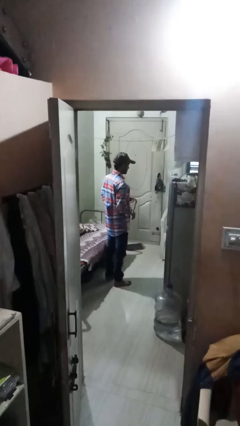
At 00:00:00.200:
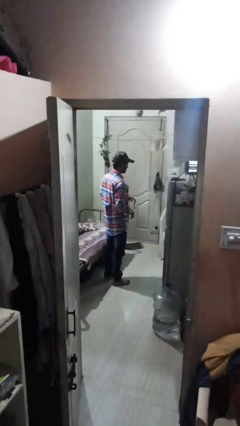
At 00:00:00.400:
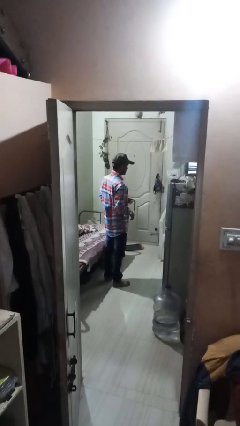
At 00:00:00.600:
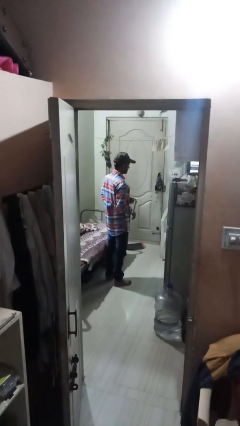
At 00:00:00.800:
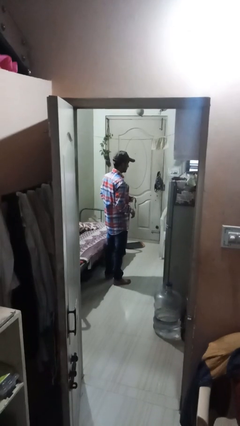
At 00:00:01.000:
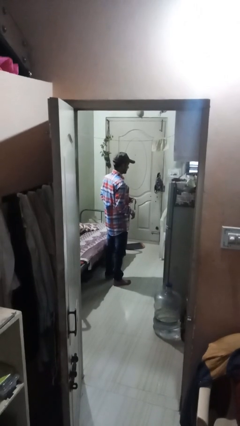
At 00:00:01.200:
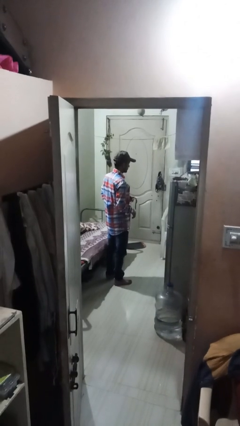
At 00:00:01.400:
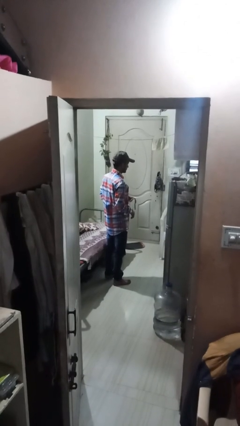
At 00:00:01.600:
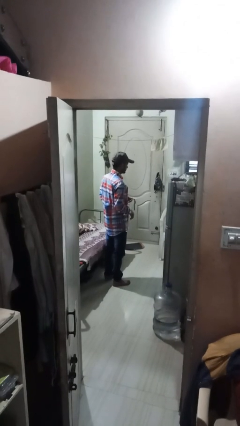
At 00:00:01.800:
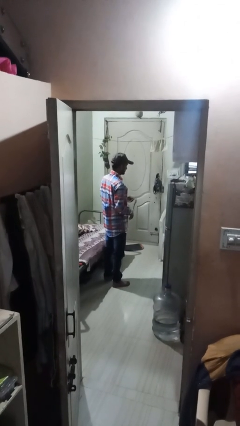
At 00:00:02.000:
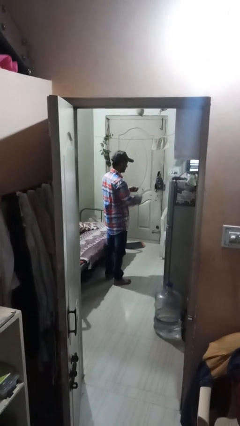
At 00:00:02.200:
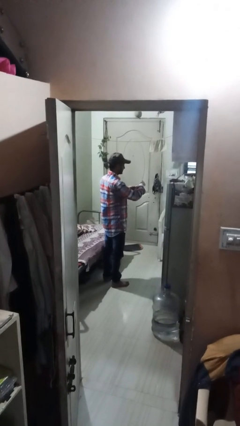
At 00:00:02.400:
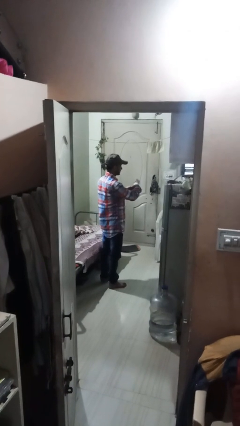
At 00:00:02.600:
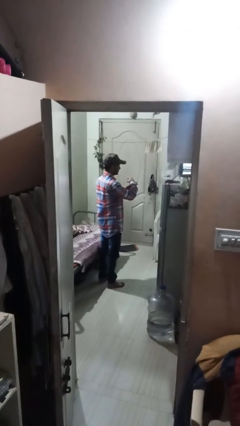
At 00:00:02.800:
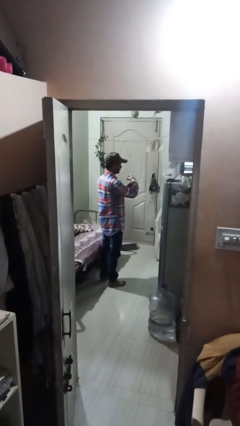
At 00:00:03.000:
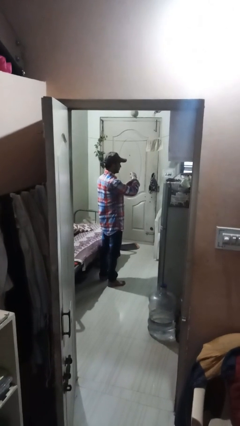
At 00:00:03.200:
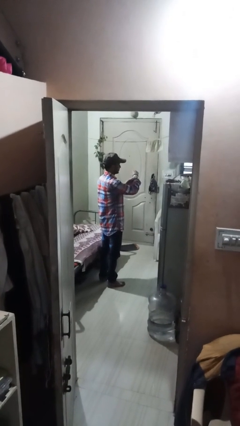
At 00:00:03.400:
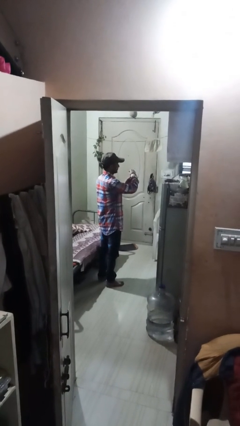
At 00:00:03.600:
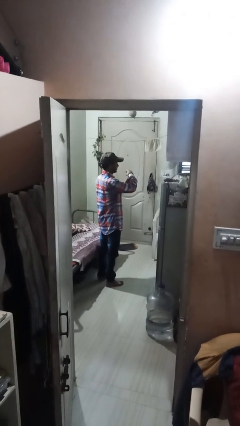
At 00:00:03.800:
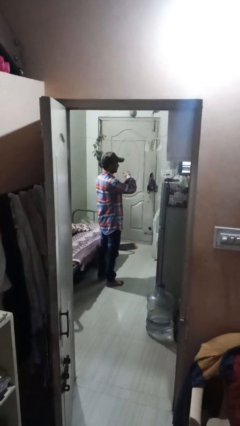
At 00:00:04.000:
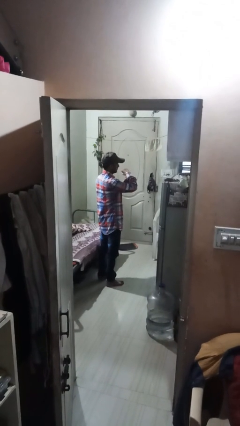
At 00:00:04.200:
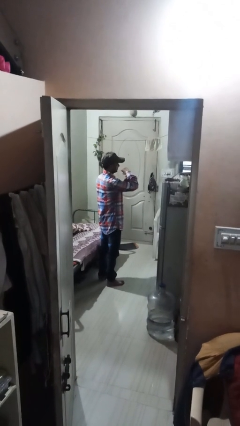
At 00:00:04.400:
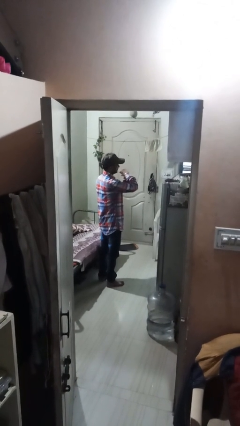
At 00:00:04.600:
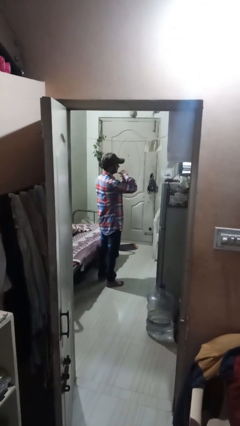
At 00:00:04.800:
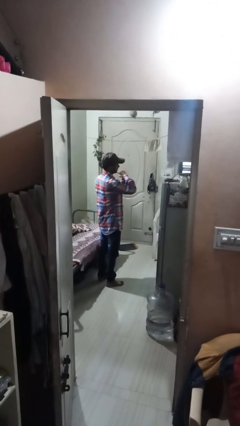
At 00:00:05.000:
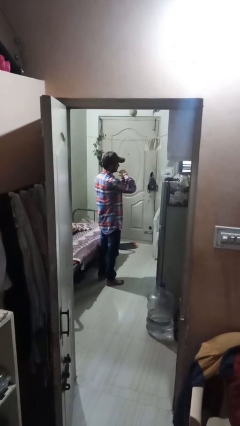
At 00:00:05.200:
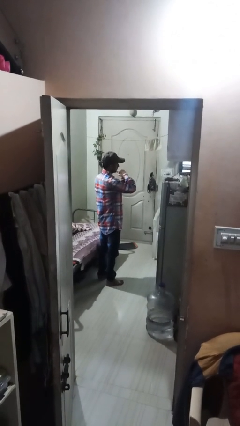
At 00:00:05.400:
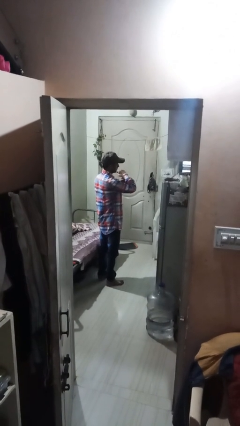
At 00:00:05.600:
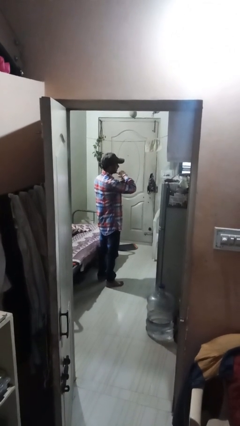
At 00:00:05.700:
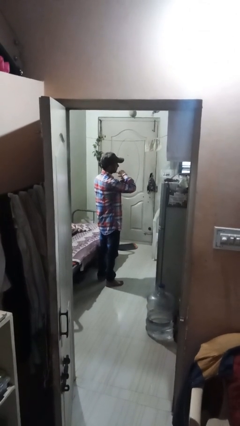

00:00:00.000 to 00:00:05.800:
person puts on wristwatch

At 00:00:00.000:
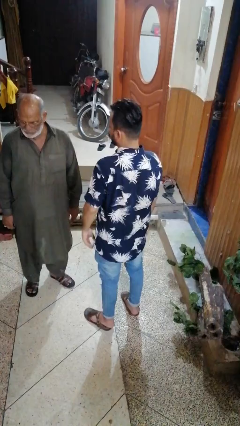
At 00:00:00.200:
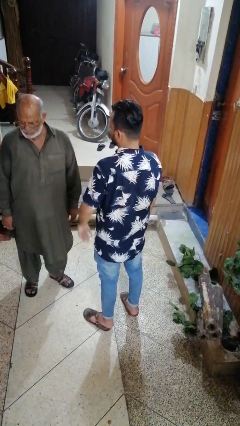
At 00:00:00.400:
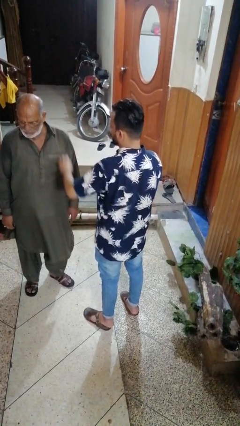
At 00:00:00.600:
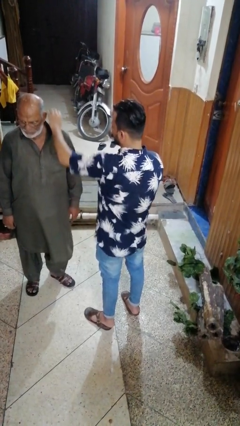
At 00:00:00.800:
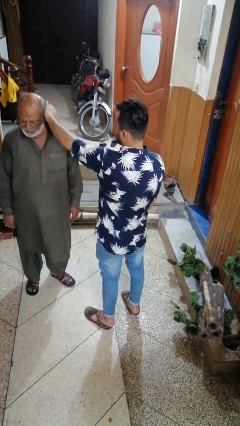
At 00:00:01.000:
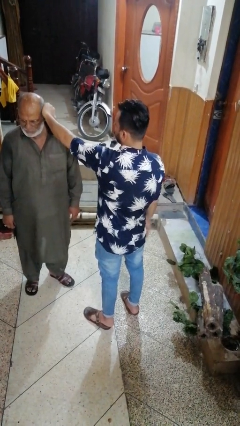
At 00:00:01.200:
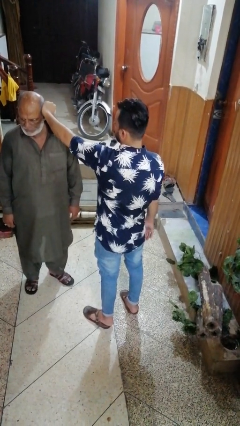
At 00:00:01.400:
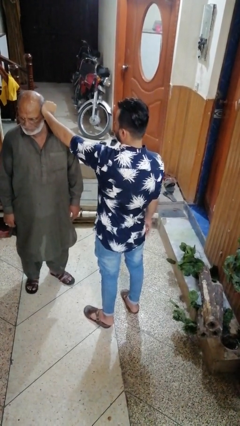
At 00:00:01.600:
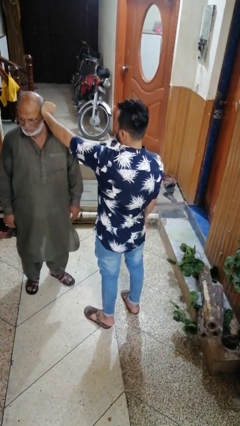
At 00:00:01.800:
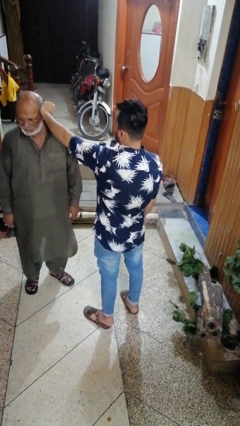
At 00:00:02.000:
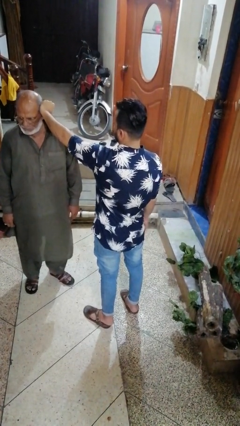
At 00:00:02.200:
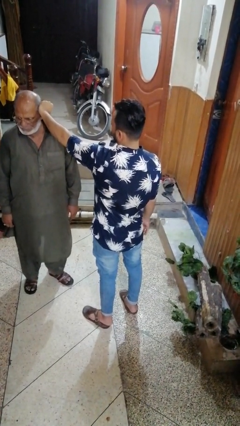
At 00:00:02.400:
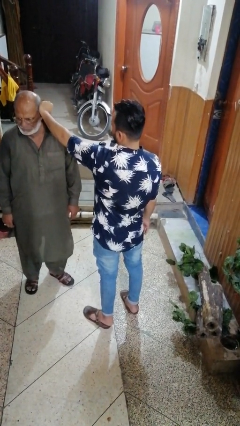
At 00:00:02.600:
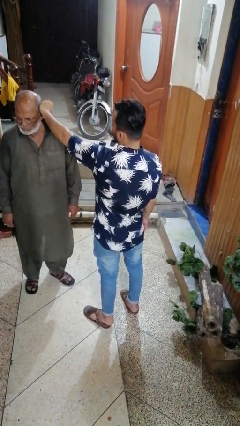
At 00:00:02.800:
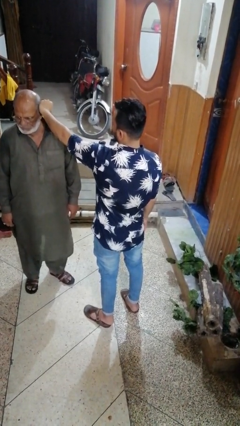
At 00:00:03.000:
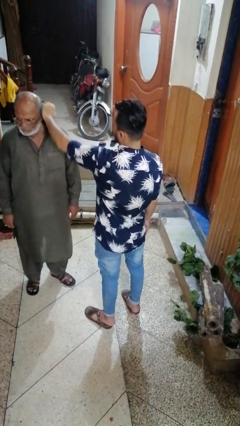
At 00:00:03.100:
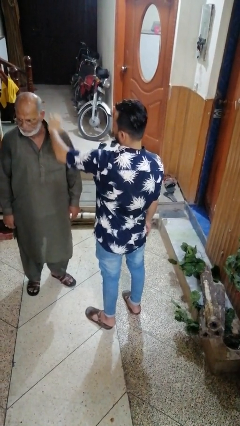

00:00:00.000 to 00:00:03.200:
person grabs person by hair

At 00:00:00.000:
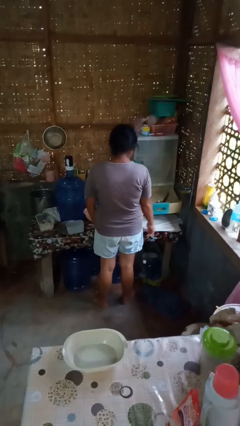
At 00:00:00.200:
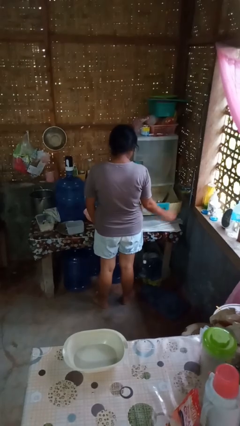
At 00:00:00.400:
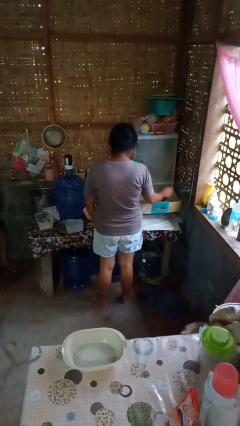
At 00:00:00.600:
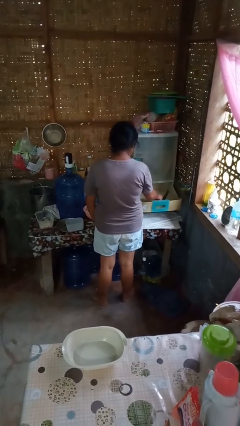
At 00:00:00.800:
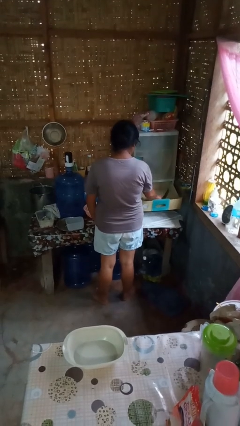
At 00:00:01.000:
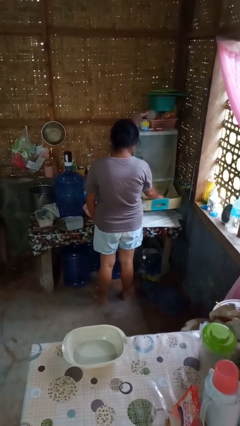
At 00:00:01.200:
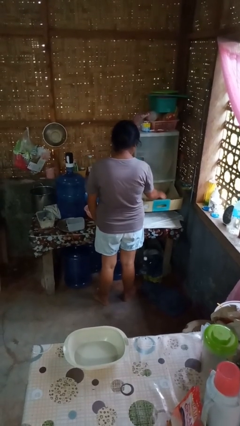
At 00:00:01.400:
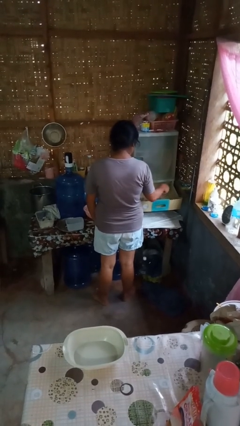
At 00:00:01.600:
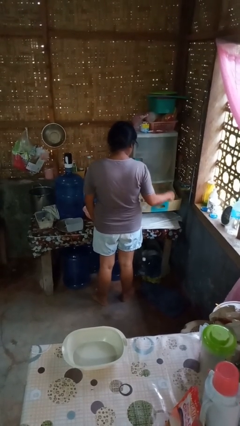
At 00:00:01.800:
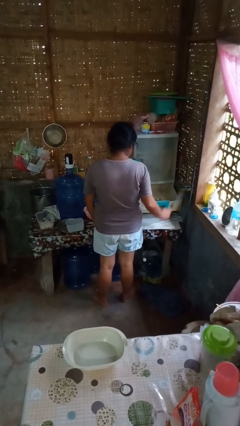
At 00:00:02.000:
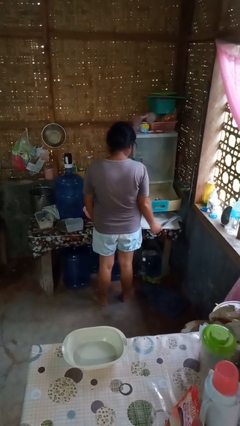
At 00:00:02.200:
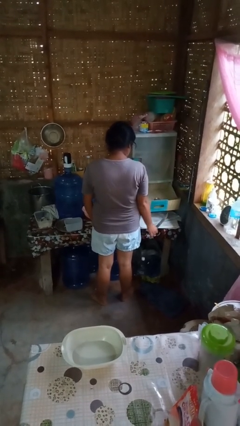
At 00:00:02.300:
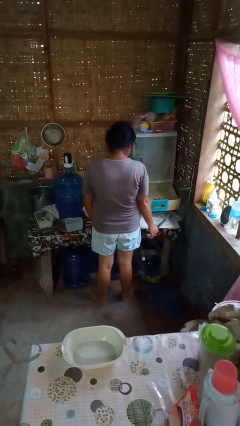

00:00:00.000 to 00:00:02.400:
person takes object from kitchen drawer

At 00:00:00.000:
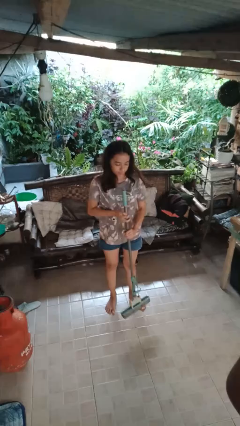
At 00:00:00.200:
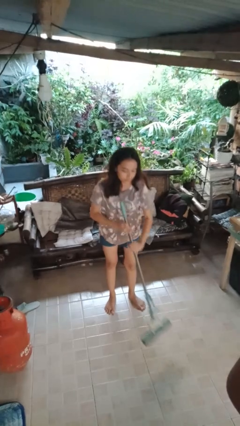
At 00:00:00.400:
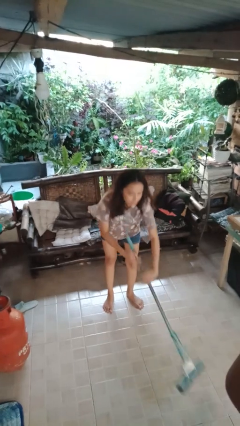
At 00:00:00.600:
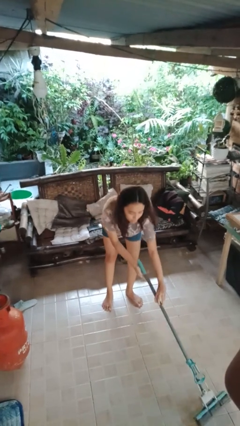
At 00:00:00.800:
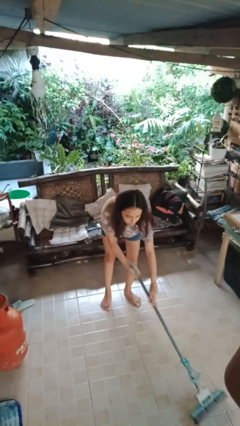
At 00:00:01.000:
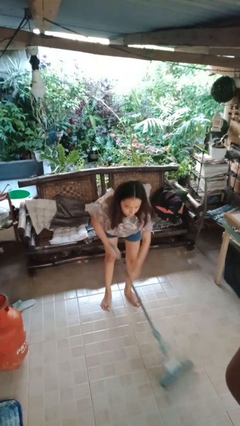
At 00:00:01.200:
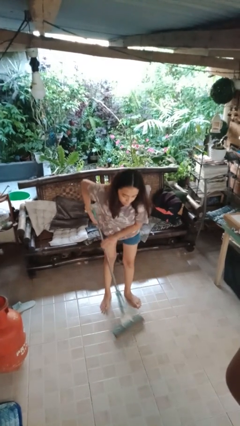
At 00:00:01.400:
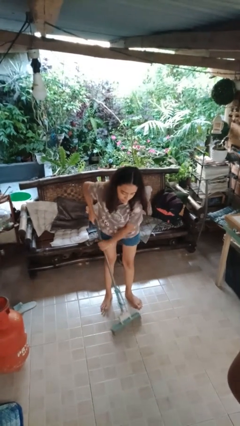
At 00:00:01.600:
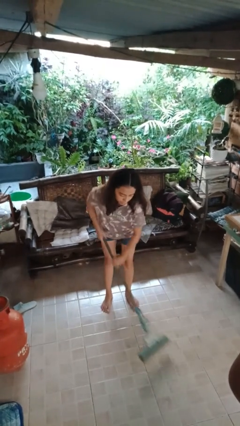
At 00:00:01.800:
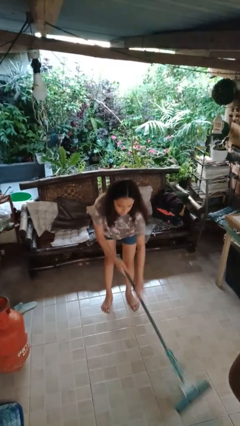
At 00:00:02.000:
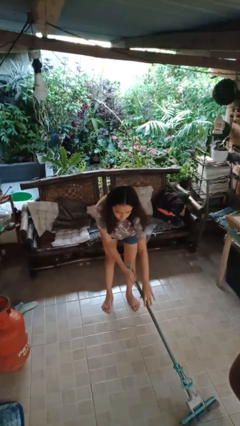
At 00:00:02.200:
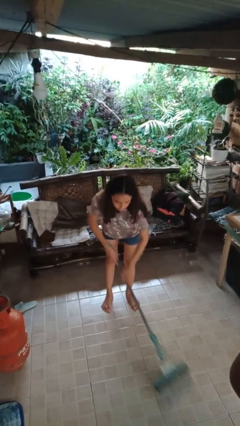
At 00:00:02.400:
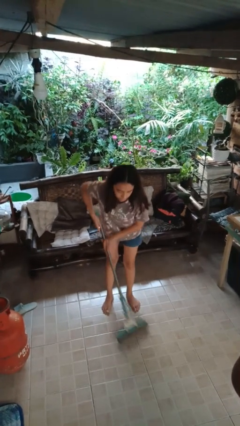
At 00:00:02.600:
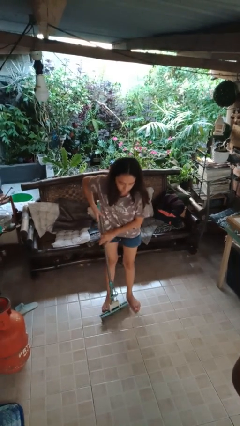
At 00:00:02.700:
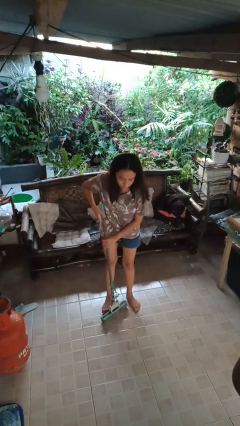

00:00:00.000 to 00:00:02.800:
person mops

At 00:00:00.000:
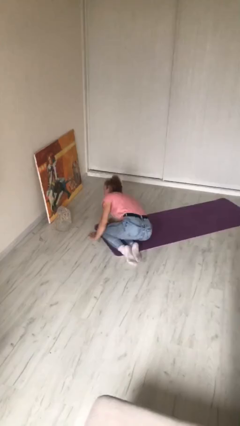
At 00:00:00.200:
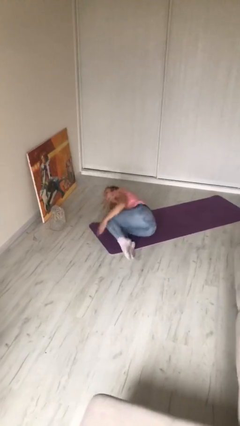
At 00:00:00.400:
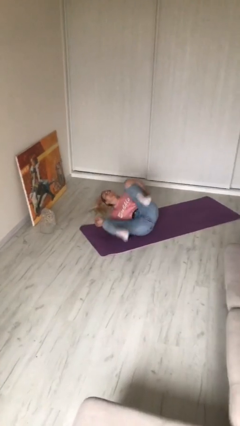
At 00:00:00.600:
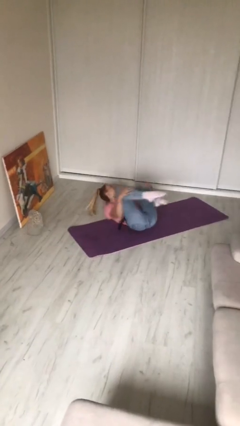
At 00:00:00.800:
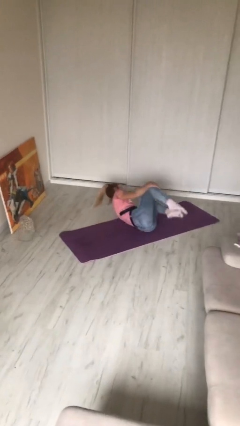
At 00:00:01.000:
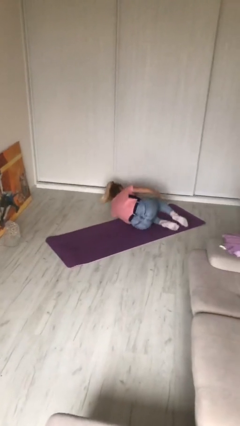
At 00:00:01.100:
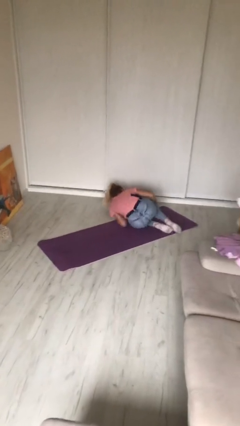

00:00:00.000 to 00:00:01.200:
person somersaults

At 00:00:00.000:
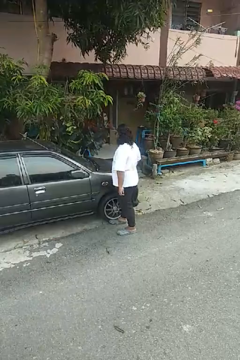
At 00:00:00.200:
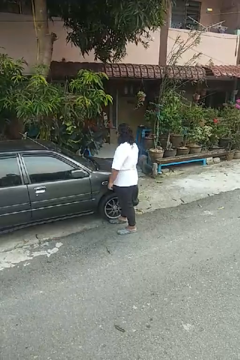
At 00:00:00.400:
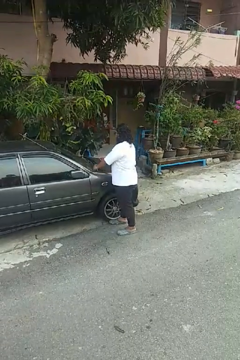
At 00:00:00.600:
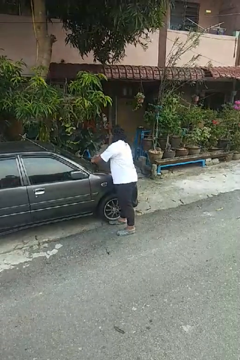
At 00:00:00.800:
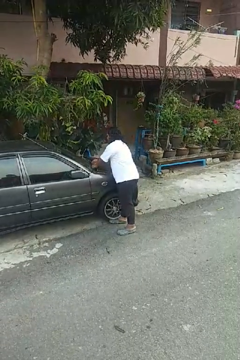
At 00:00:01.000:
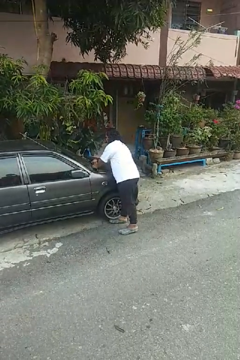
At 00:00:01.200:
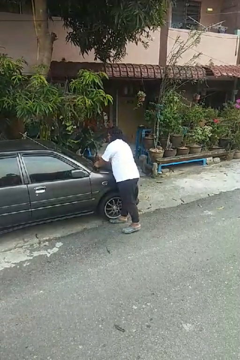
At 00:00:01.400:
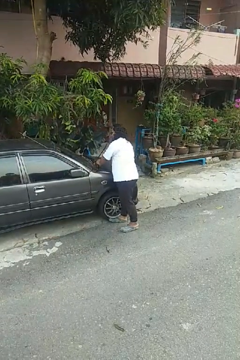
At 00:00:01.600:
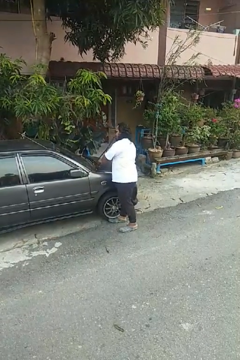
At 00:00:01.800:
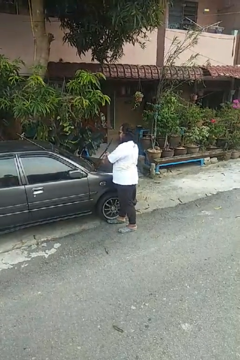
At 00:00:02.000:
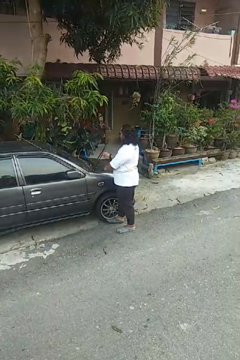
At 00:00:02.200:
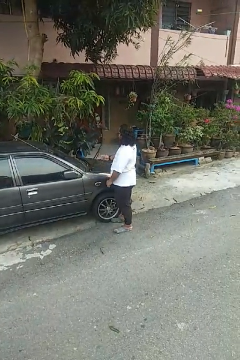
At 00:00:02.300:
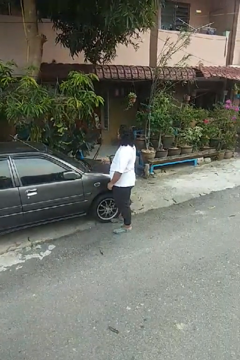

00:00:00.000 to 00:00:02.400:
person flips up car wipers
